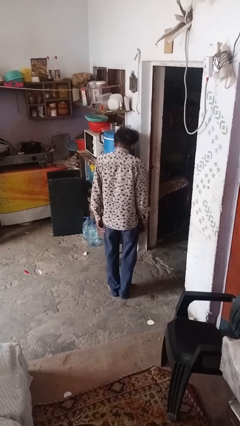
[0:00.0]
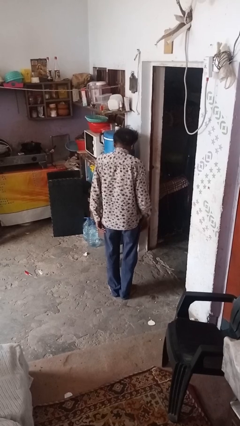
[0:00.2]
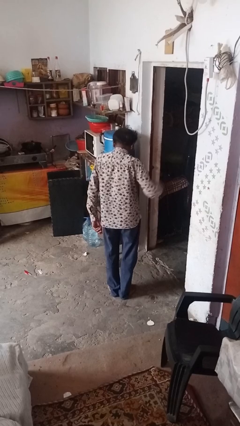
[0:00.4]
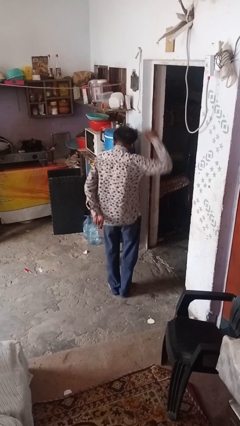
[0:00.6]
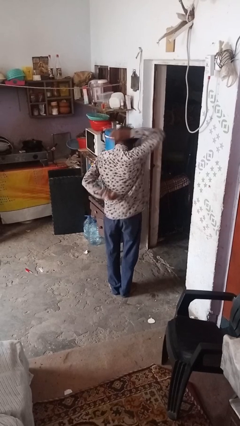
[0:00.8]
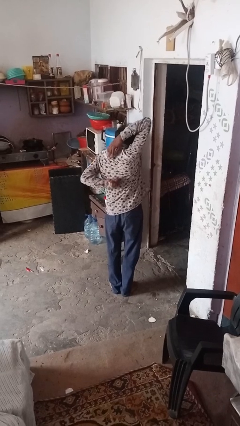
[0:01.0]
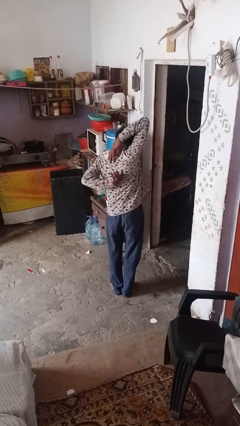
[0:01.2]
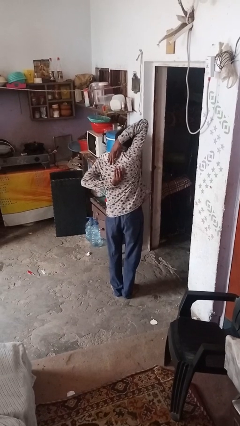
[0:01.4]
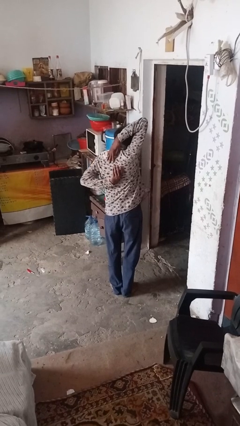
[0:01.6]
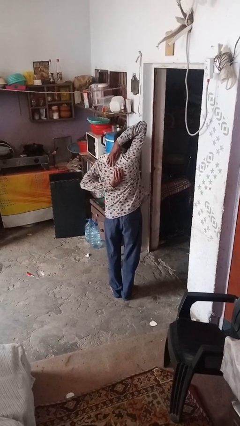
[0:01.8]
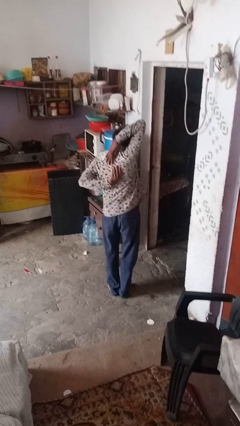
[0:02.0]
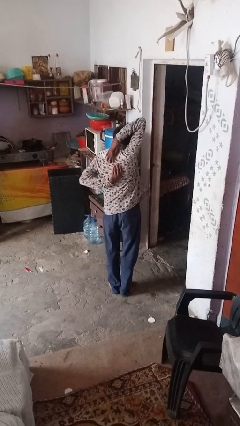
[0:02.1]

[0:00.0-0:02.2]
person stretches back

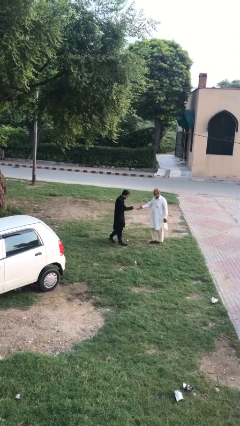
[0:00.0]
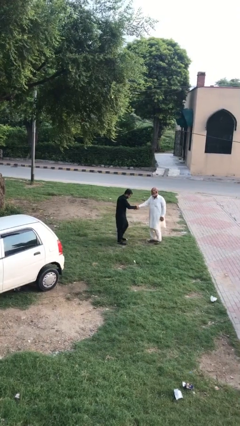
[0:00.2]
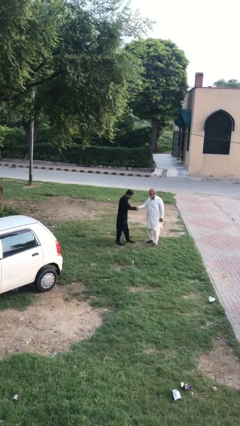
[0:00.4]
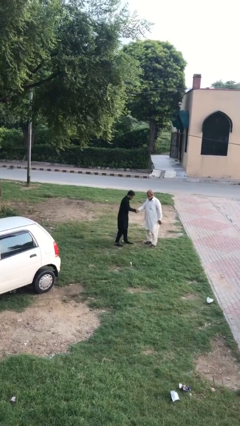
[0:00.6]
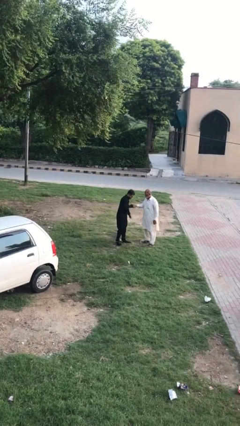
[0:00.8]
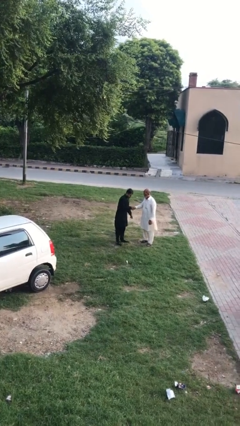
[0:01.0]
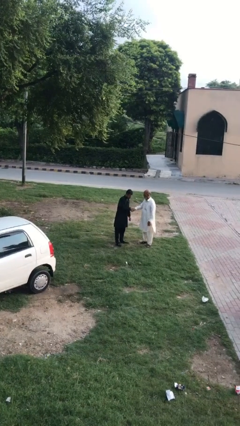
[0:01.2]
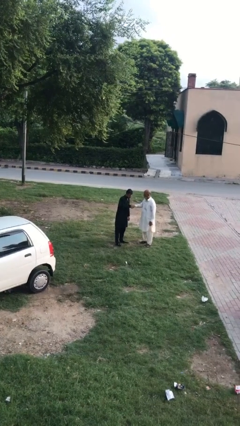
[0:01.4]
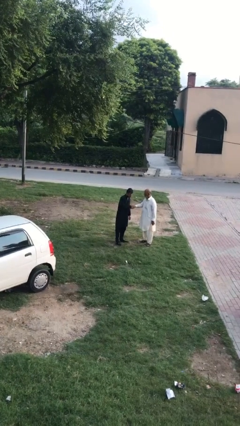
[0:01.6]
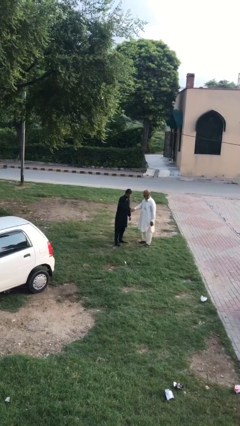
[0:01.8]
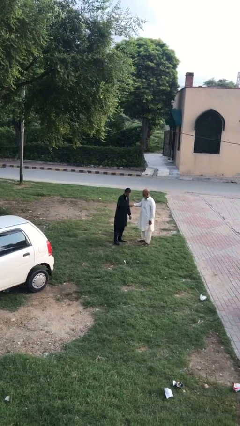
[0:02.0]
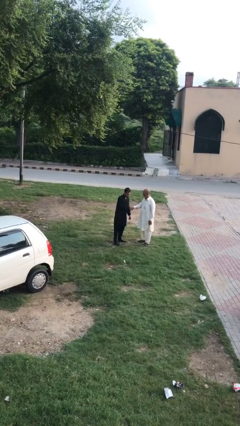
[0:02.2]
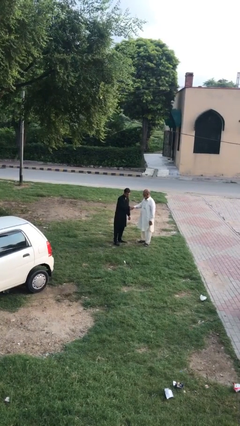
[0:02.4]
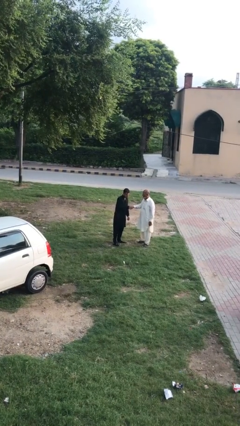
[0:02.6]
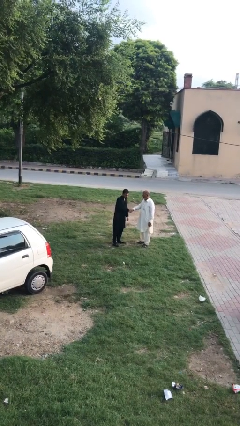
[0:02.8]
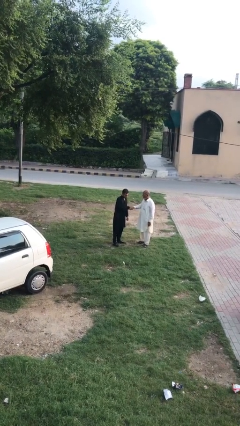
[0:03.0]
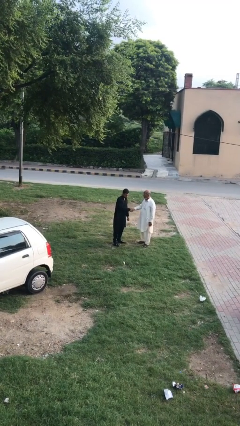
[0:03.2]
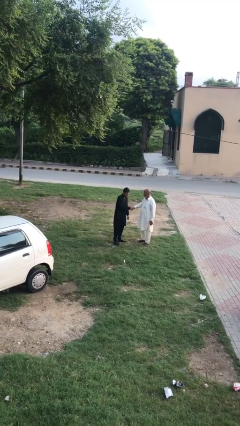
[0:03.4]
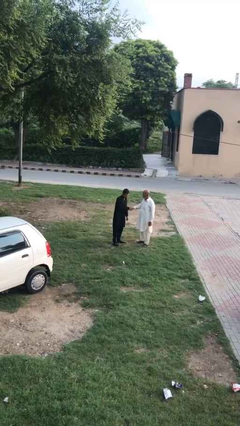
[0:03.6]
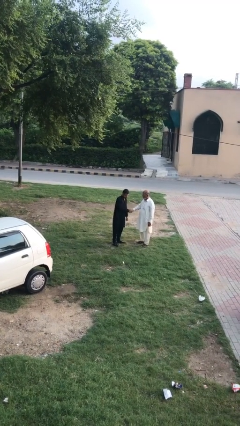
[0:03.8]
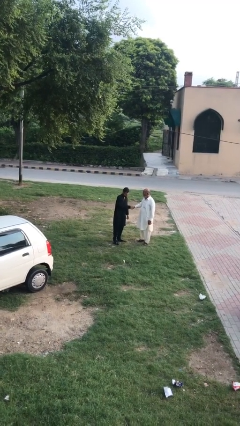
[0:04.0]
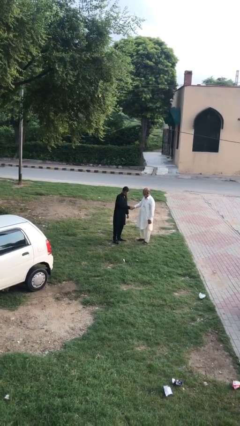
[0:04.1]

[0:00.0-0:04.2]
person shakes hand

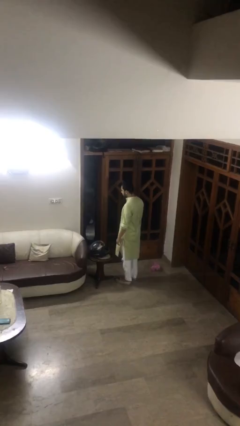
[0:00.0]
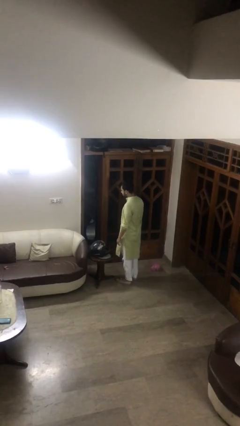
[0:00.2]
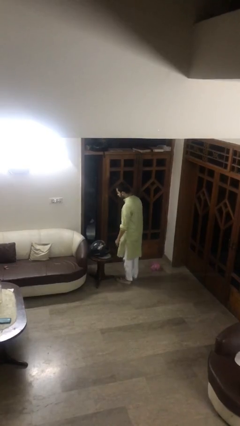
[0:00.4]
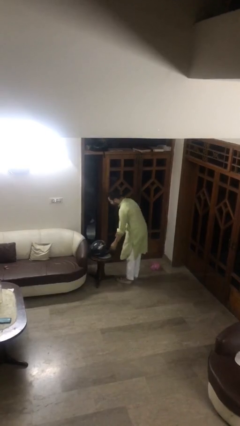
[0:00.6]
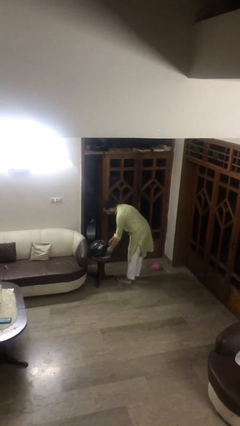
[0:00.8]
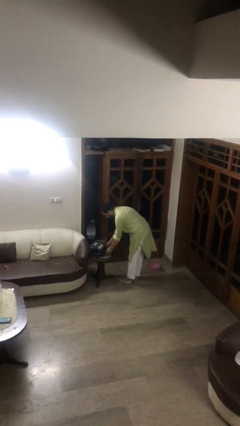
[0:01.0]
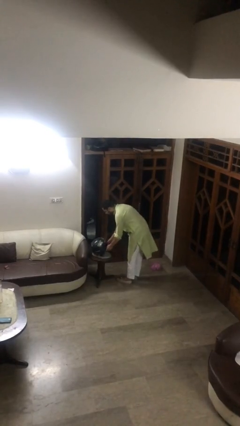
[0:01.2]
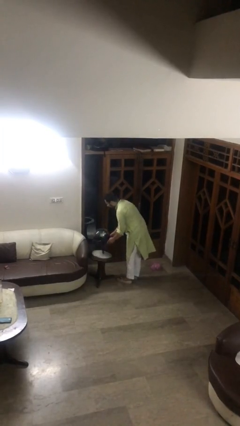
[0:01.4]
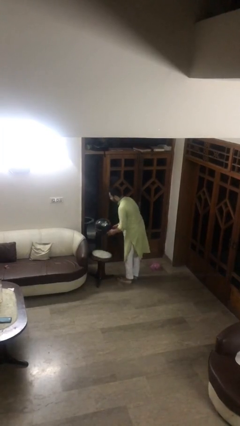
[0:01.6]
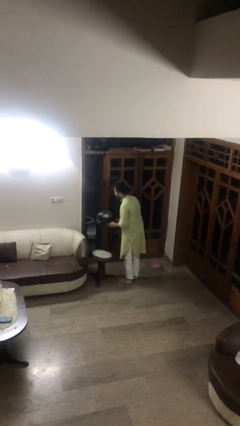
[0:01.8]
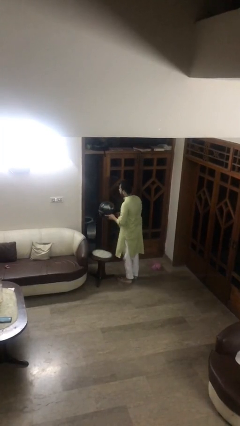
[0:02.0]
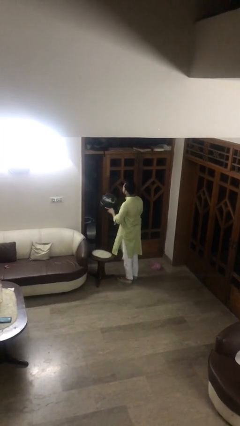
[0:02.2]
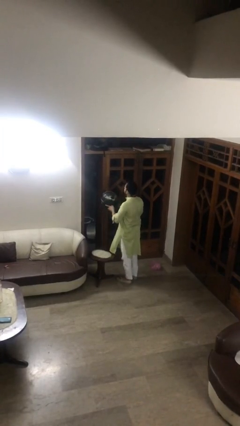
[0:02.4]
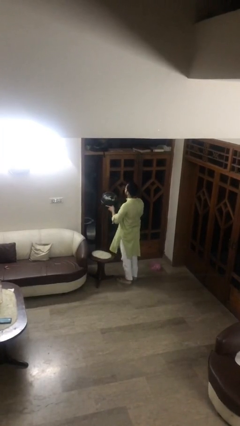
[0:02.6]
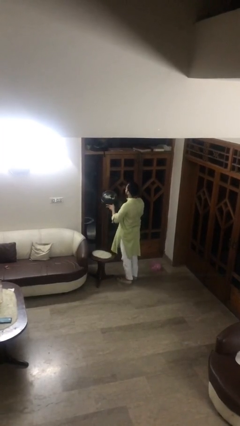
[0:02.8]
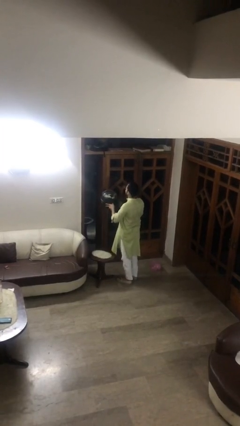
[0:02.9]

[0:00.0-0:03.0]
person picks up object from table

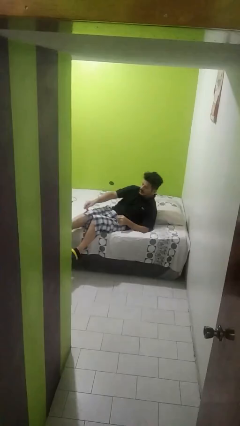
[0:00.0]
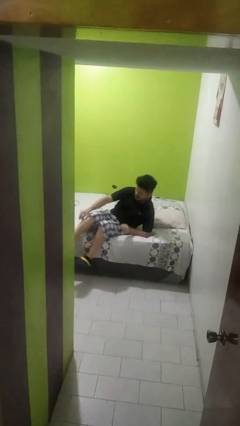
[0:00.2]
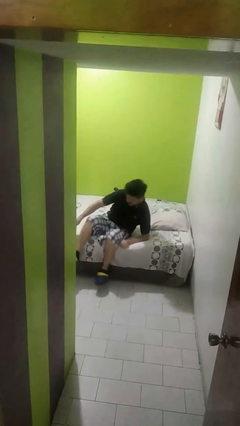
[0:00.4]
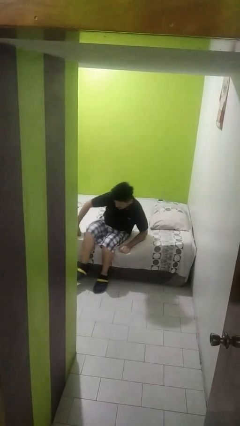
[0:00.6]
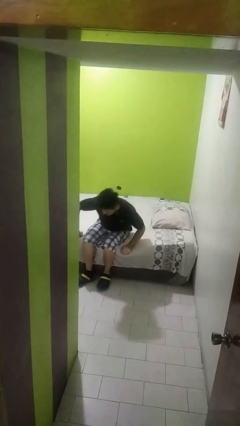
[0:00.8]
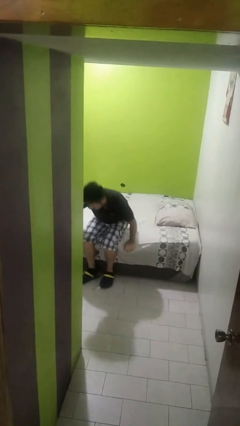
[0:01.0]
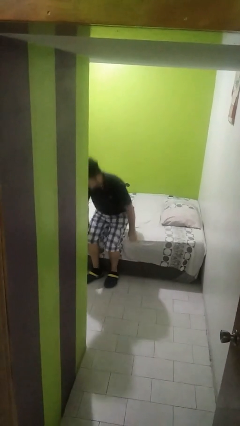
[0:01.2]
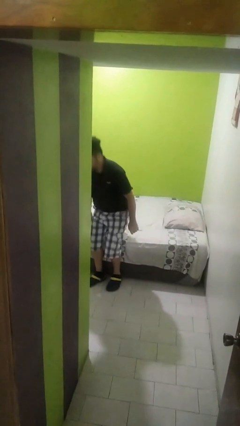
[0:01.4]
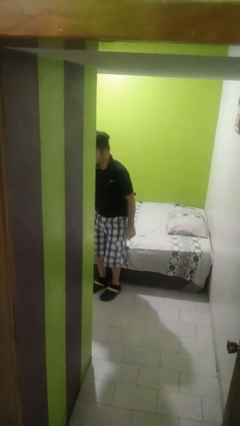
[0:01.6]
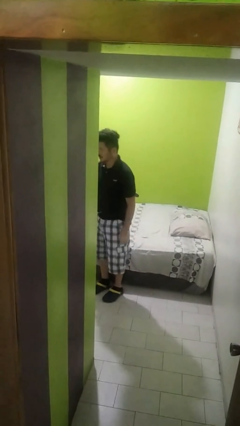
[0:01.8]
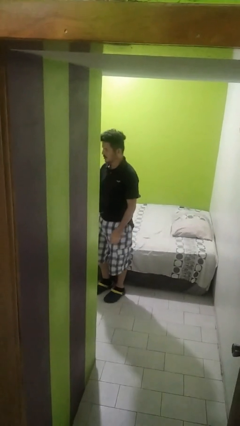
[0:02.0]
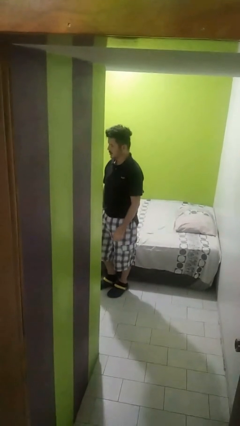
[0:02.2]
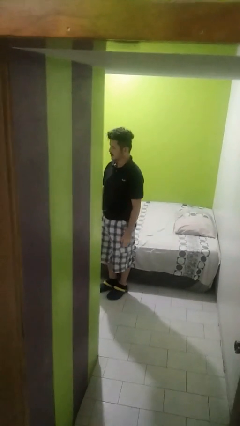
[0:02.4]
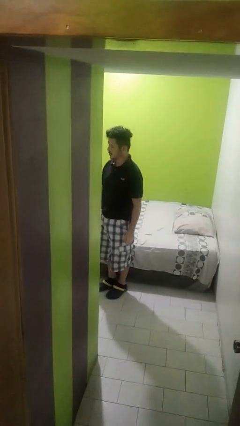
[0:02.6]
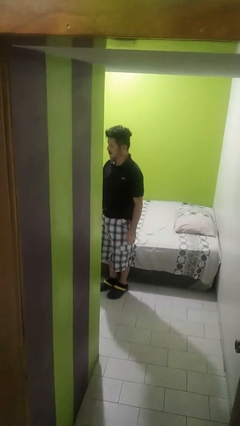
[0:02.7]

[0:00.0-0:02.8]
person stands up

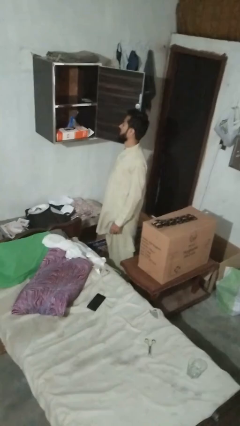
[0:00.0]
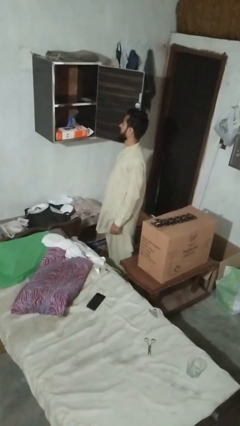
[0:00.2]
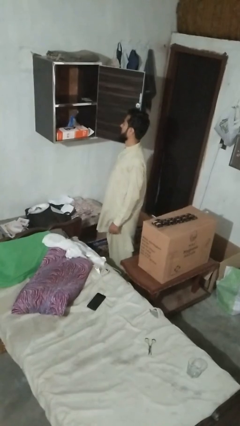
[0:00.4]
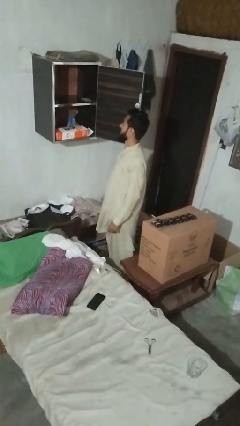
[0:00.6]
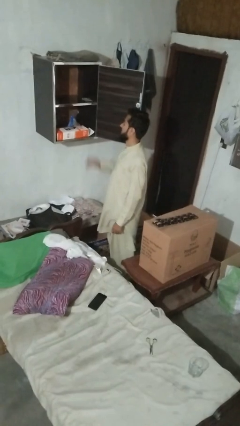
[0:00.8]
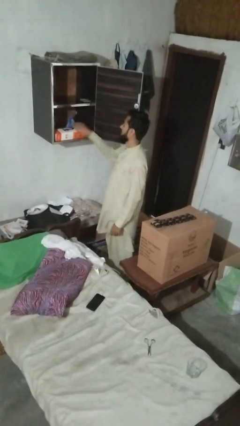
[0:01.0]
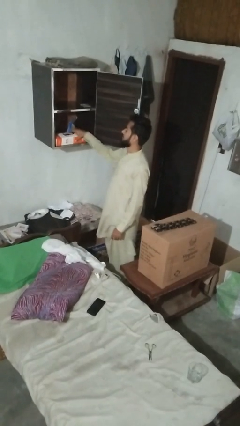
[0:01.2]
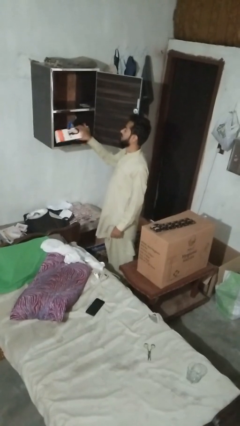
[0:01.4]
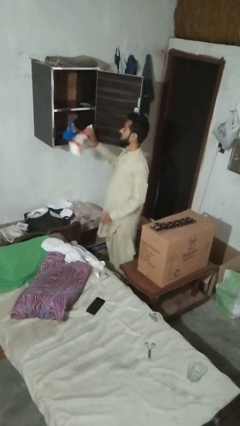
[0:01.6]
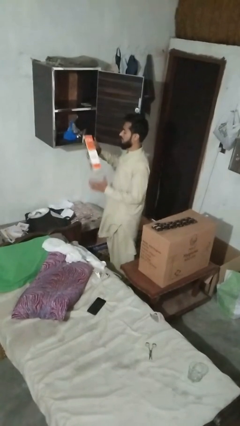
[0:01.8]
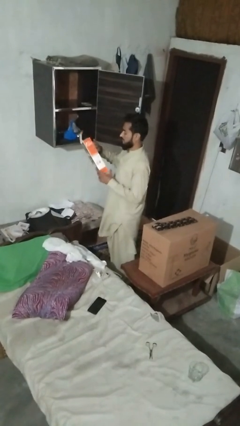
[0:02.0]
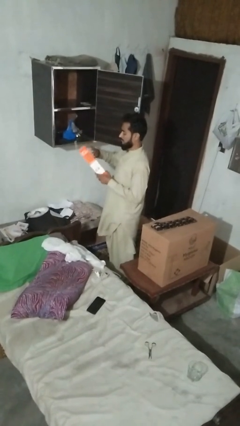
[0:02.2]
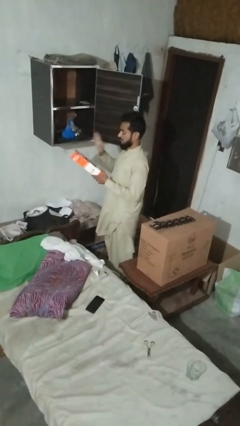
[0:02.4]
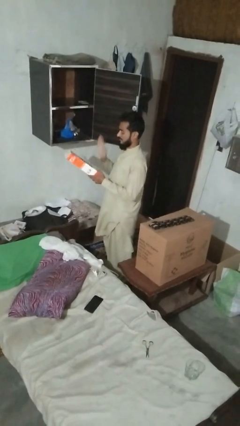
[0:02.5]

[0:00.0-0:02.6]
person picks up object from cabinet

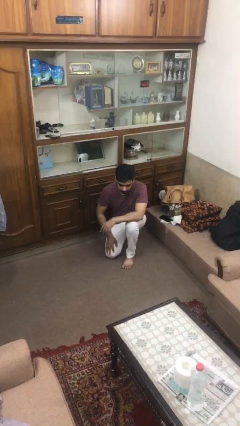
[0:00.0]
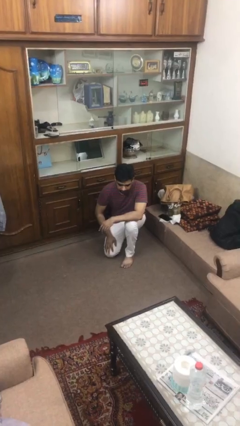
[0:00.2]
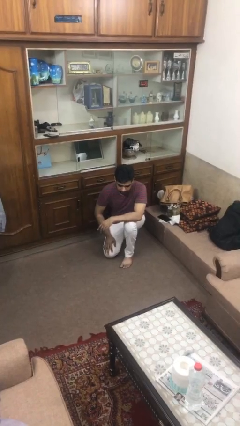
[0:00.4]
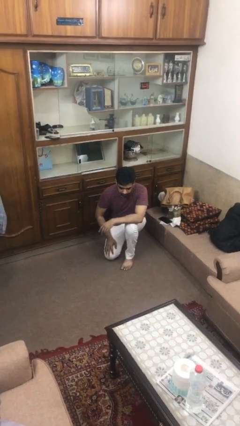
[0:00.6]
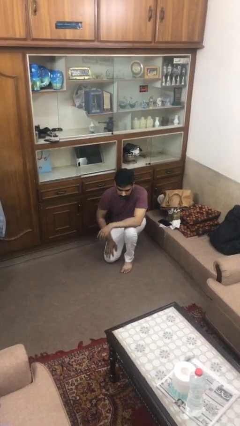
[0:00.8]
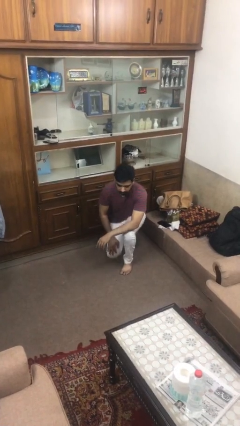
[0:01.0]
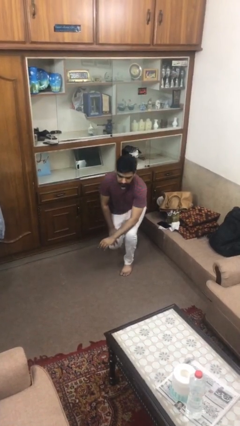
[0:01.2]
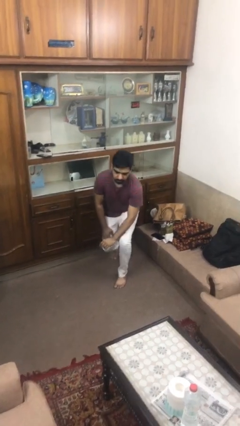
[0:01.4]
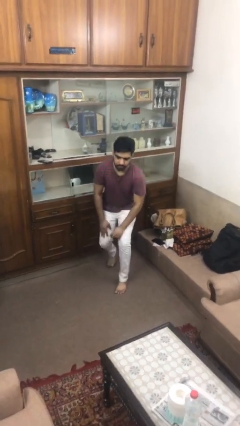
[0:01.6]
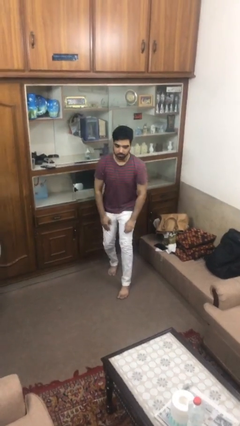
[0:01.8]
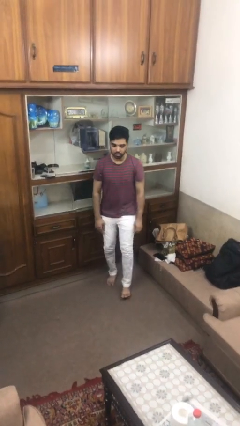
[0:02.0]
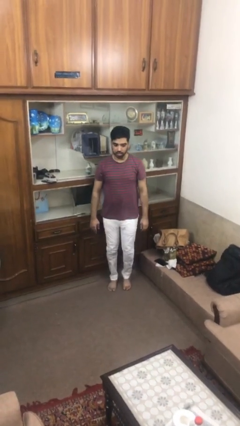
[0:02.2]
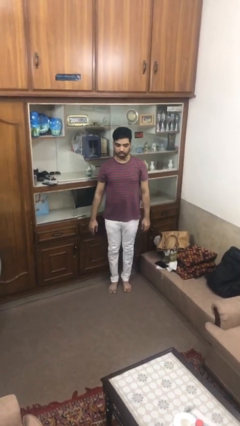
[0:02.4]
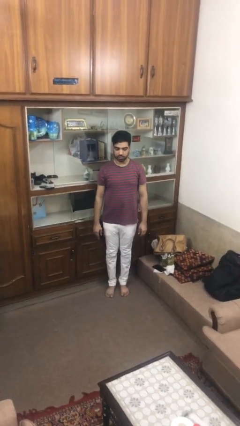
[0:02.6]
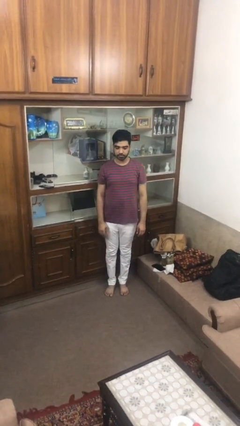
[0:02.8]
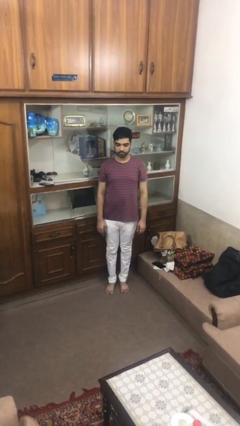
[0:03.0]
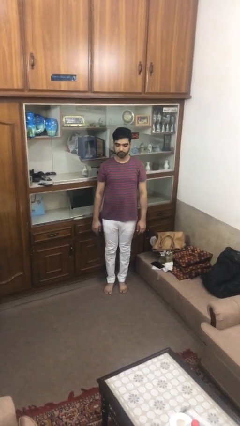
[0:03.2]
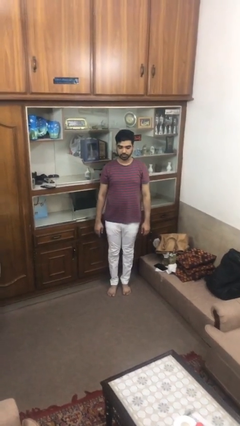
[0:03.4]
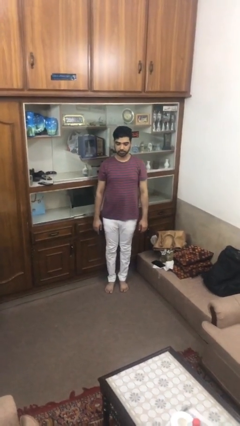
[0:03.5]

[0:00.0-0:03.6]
person stands up from floor
